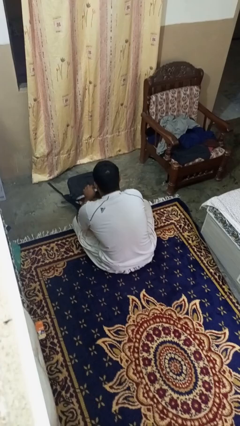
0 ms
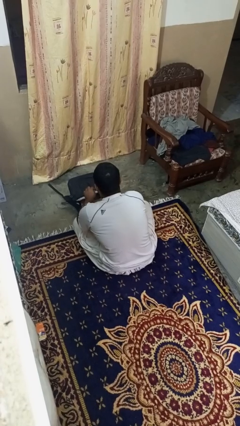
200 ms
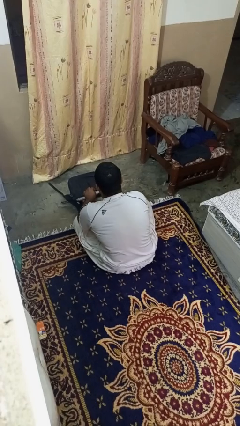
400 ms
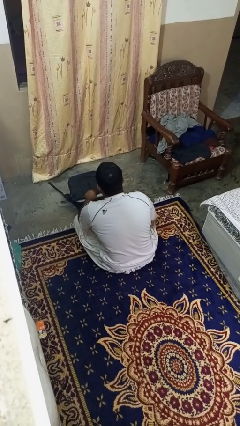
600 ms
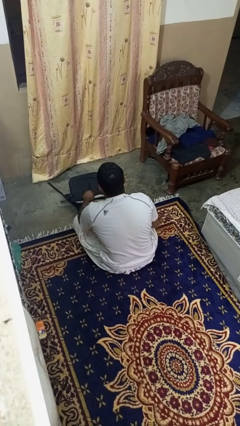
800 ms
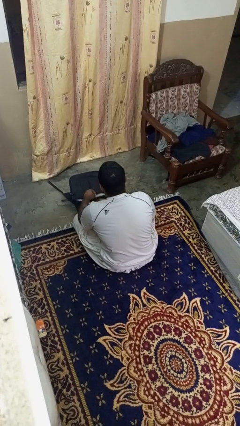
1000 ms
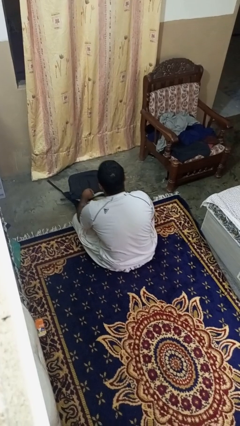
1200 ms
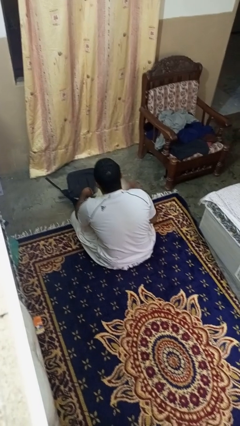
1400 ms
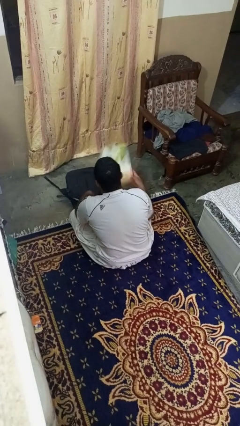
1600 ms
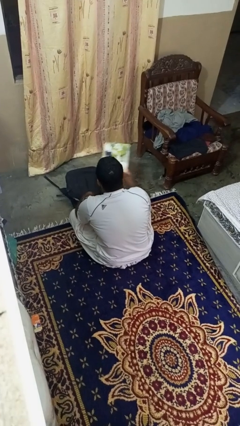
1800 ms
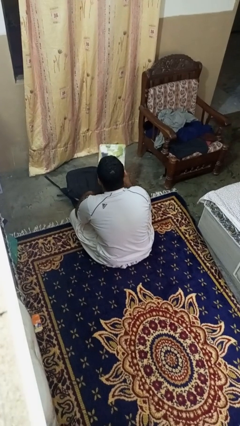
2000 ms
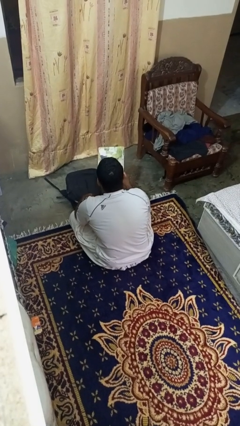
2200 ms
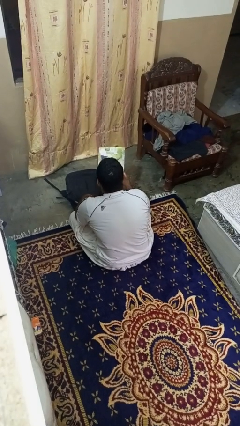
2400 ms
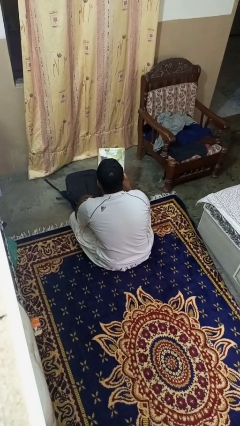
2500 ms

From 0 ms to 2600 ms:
person takes object from bag

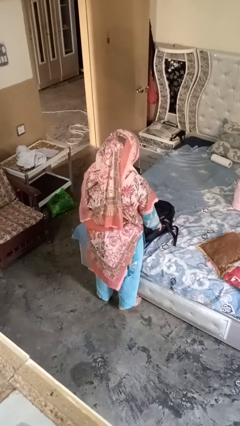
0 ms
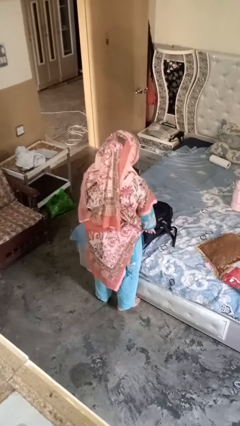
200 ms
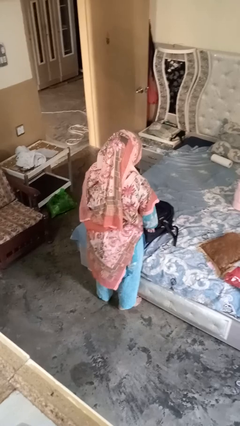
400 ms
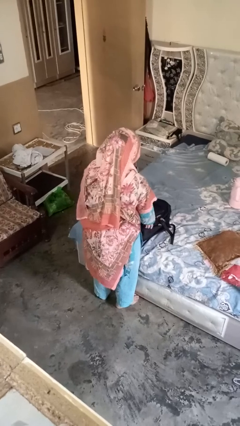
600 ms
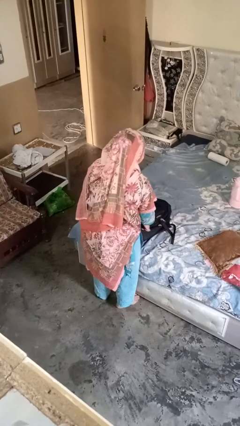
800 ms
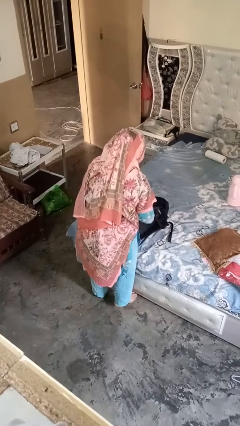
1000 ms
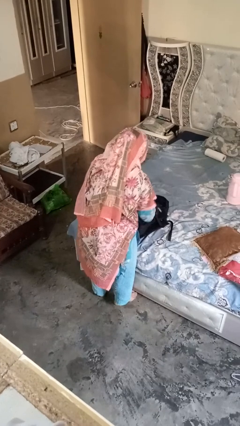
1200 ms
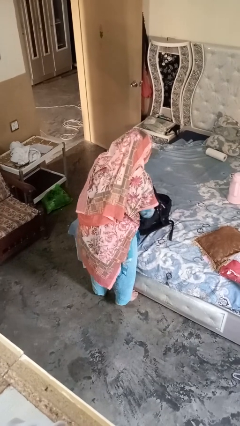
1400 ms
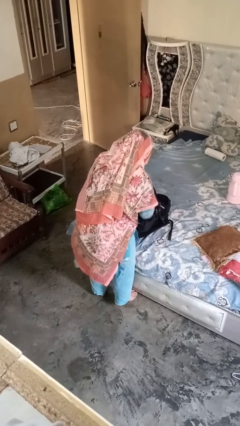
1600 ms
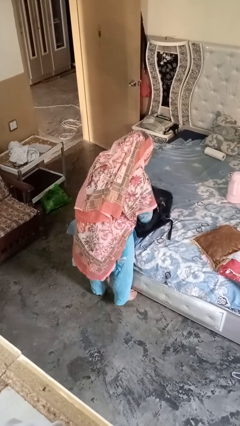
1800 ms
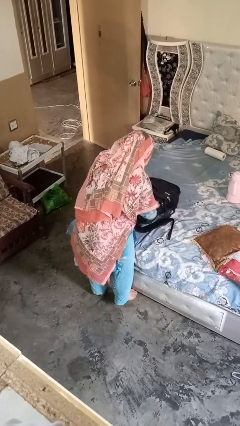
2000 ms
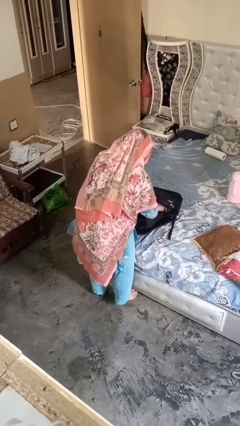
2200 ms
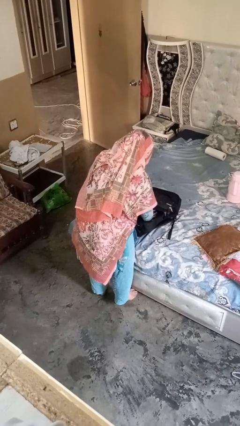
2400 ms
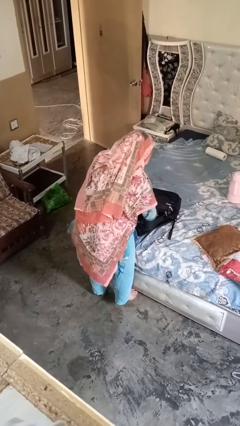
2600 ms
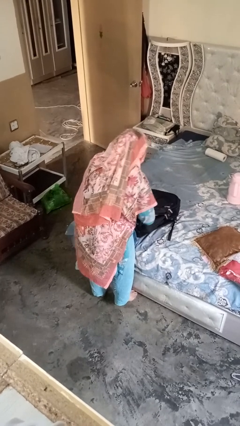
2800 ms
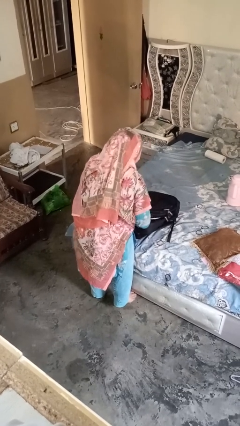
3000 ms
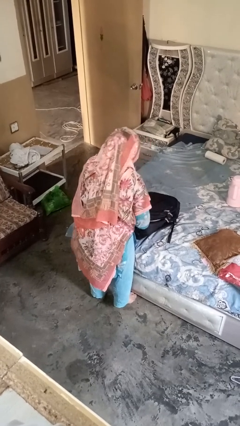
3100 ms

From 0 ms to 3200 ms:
person searches in bag

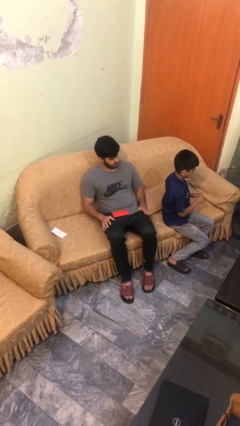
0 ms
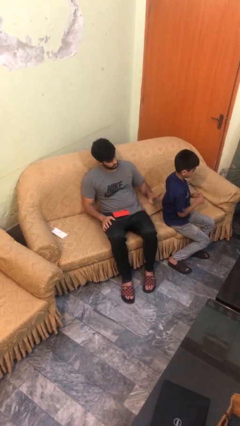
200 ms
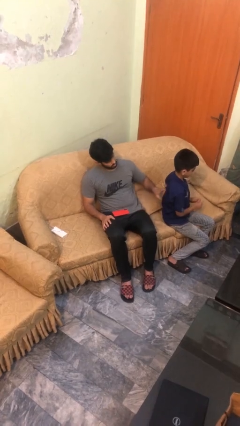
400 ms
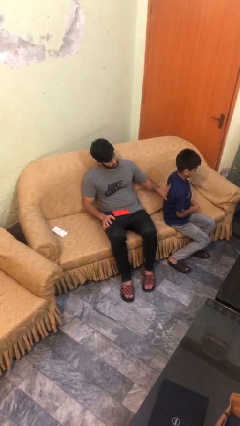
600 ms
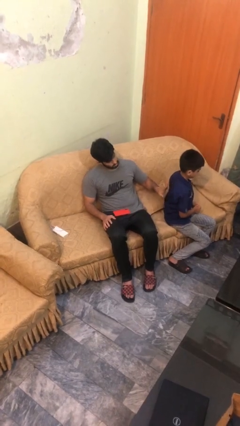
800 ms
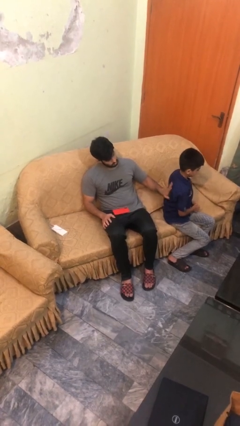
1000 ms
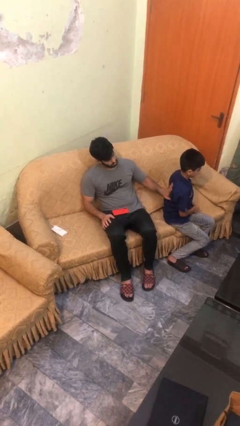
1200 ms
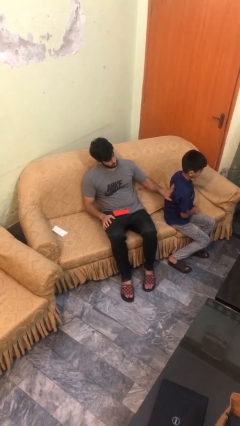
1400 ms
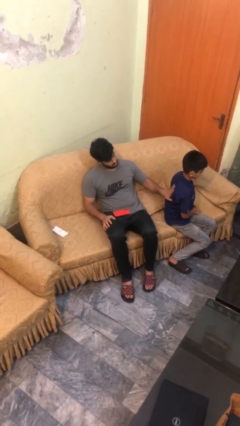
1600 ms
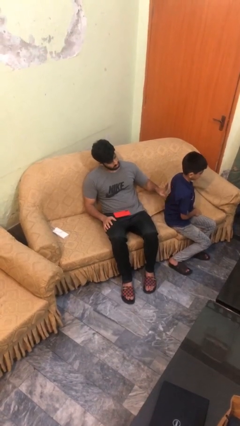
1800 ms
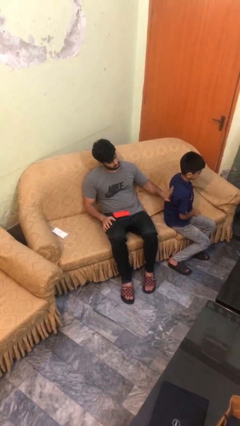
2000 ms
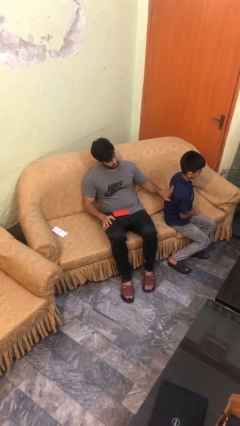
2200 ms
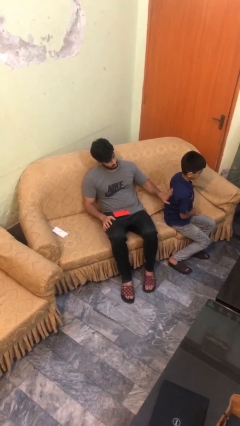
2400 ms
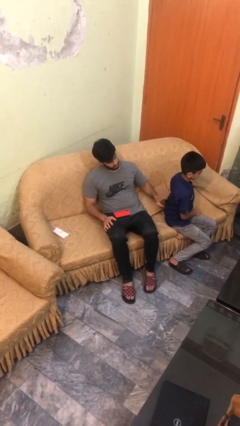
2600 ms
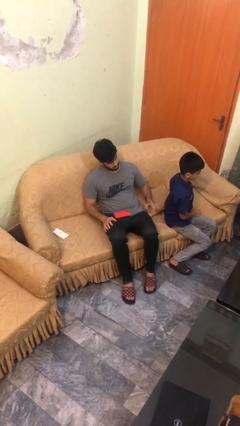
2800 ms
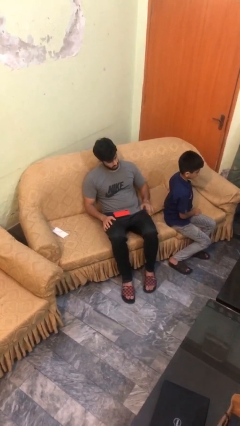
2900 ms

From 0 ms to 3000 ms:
person touches back of person

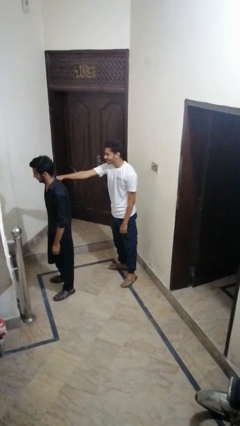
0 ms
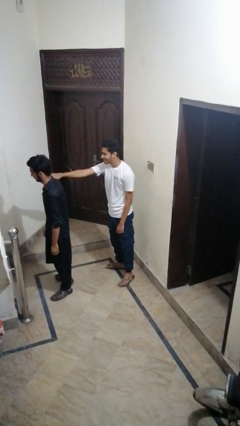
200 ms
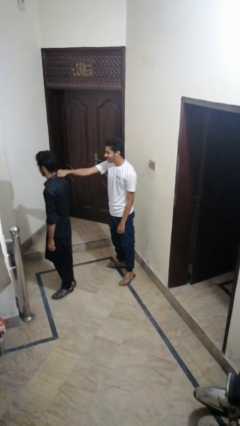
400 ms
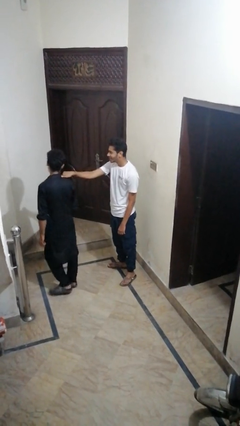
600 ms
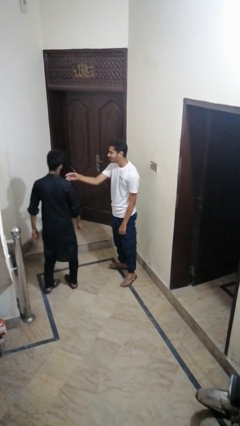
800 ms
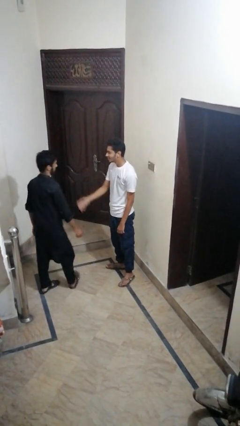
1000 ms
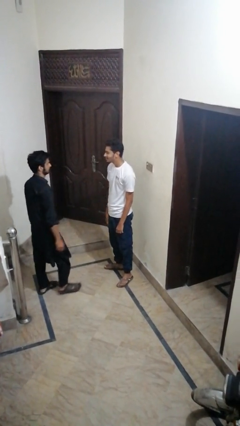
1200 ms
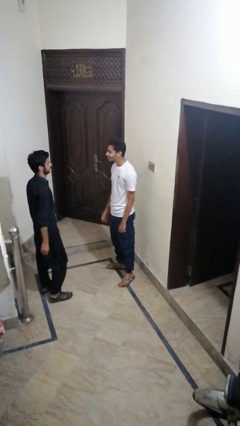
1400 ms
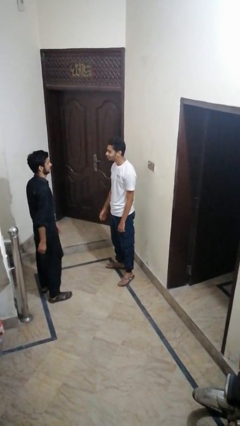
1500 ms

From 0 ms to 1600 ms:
person spins person around

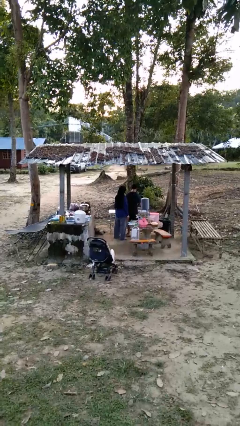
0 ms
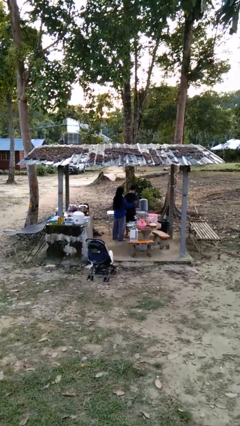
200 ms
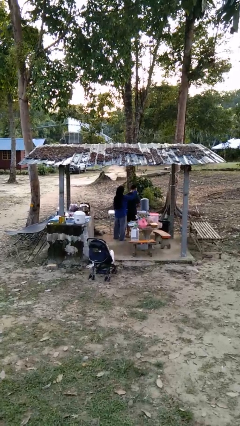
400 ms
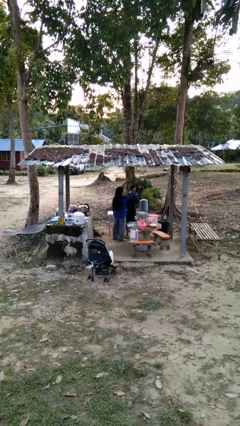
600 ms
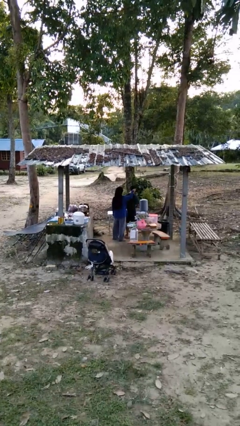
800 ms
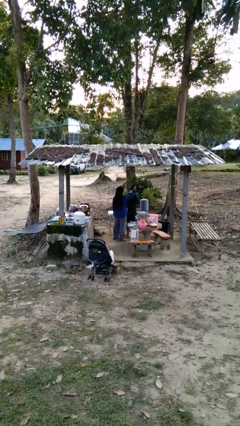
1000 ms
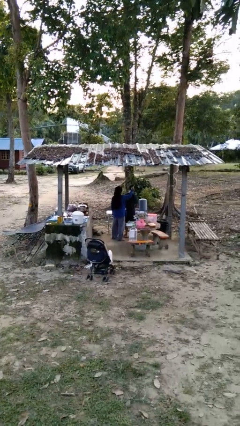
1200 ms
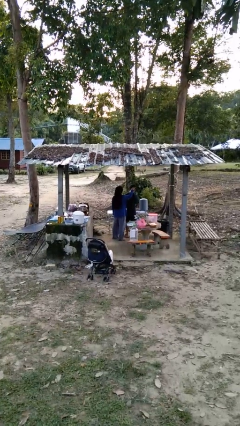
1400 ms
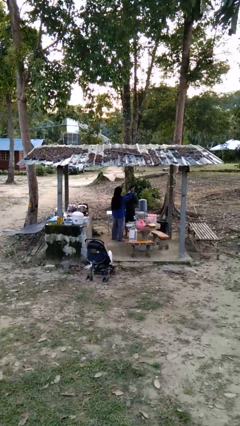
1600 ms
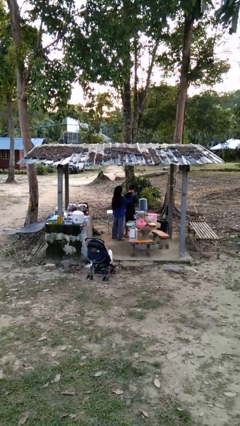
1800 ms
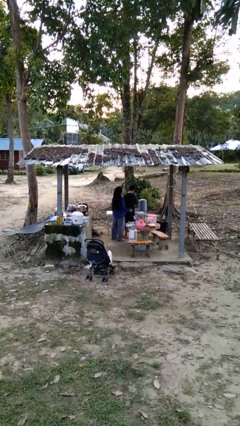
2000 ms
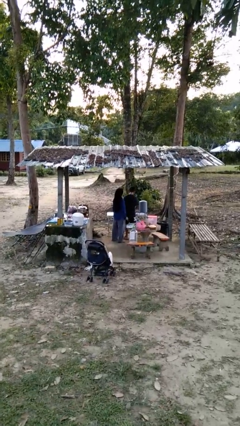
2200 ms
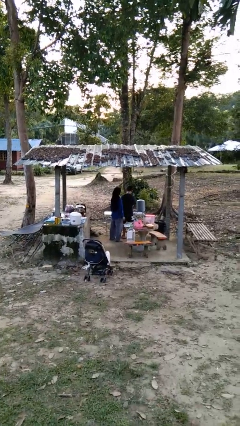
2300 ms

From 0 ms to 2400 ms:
person brushes hair of person

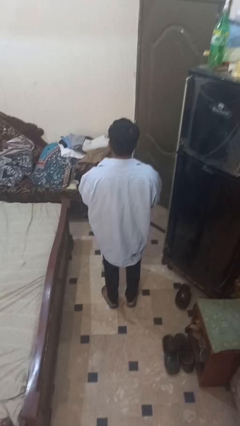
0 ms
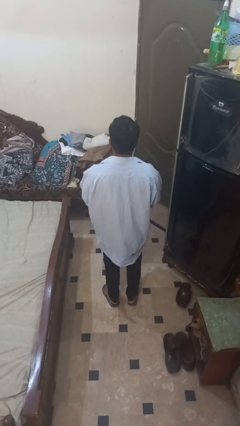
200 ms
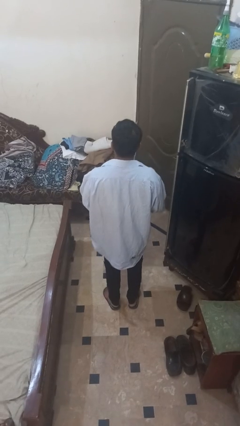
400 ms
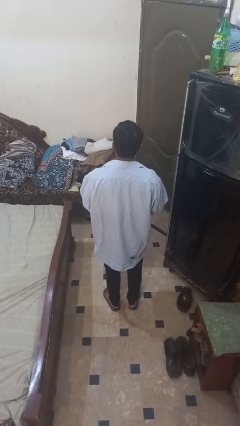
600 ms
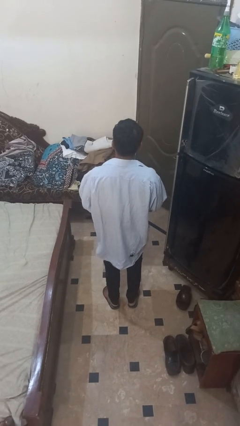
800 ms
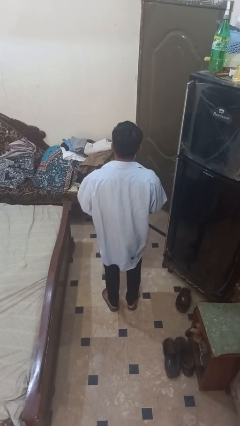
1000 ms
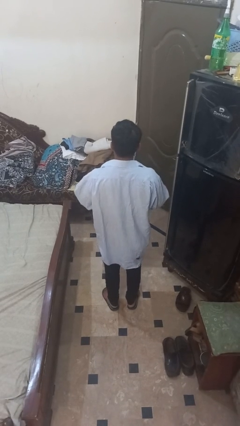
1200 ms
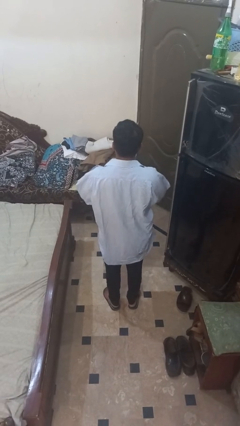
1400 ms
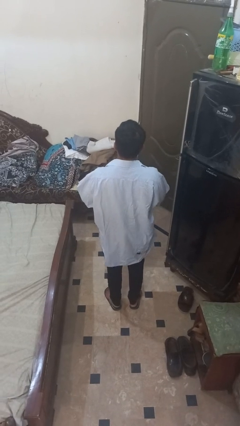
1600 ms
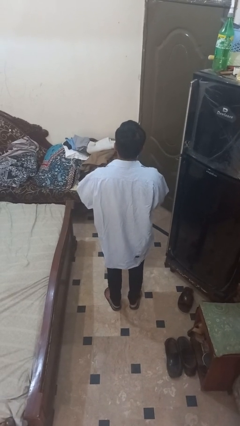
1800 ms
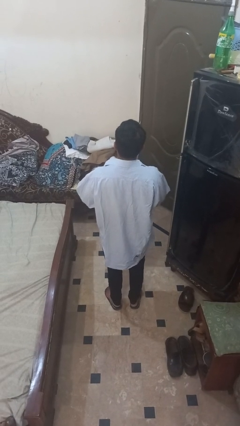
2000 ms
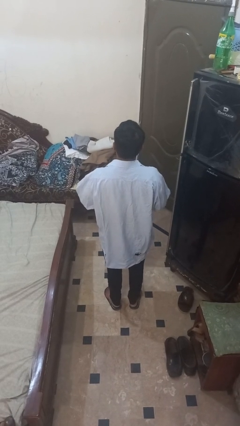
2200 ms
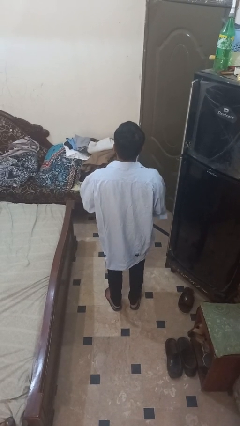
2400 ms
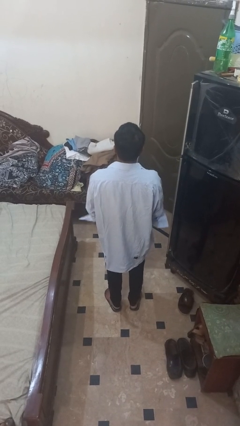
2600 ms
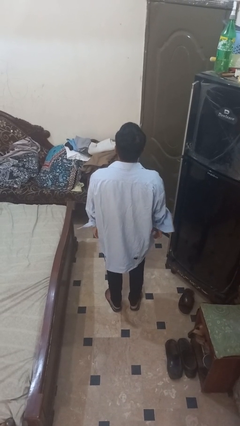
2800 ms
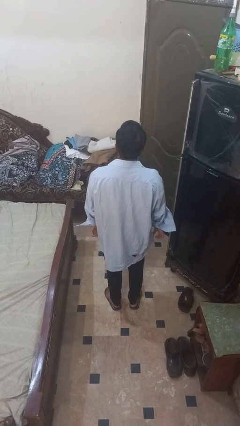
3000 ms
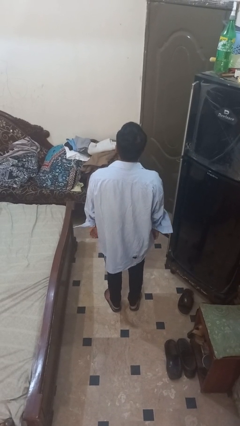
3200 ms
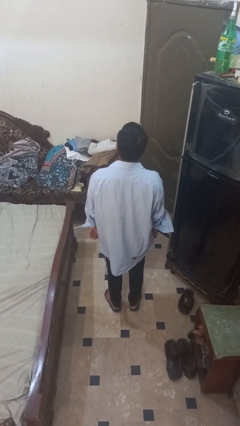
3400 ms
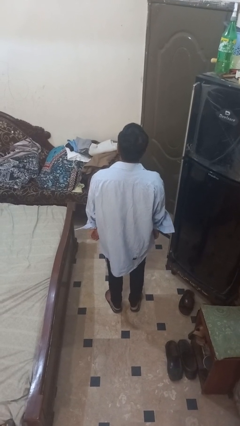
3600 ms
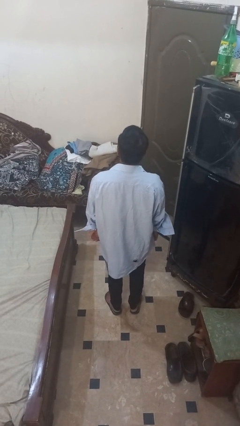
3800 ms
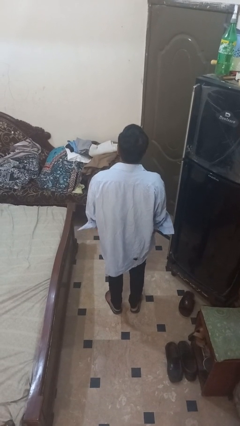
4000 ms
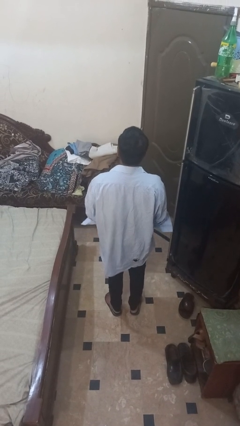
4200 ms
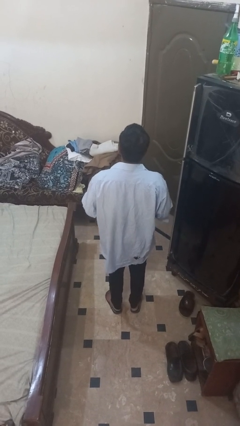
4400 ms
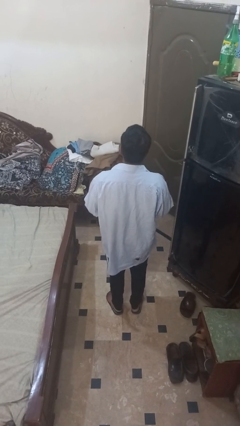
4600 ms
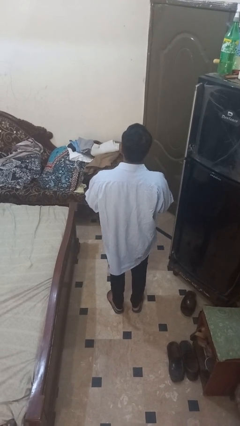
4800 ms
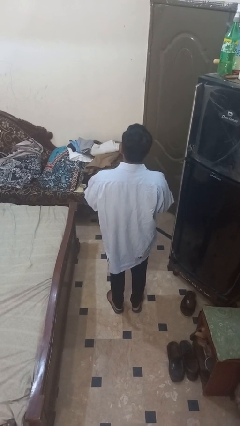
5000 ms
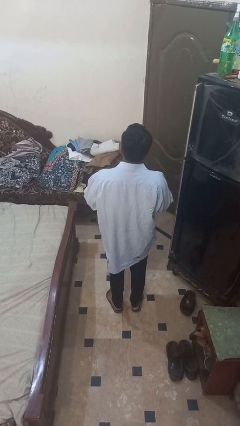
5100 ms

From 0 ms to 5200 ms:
person buttons shirt
